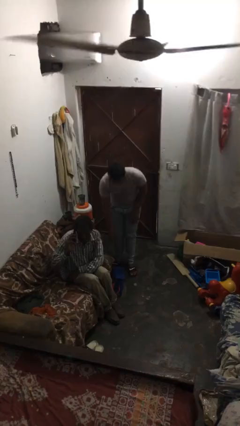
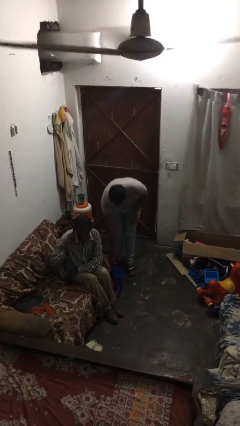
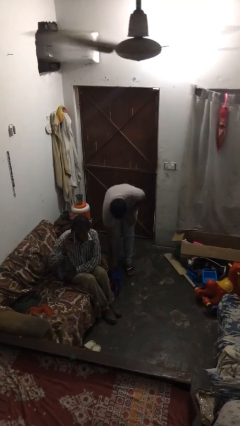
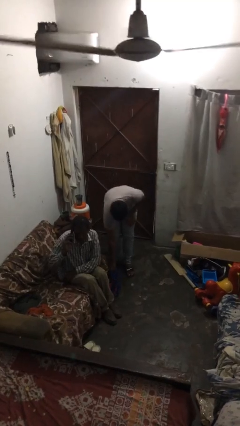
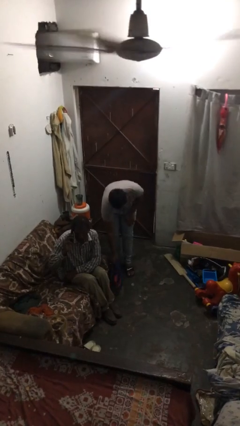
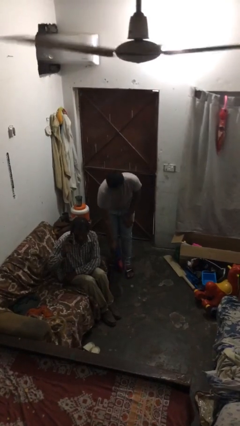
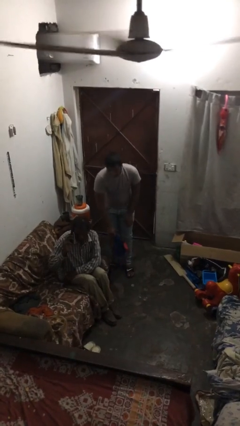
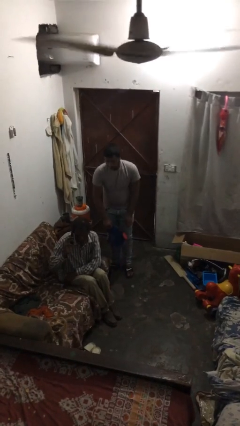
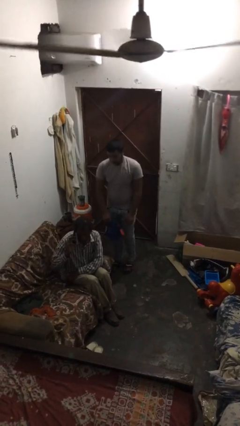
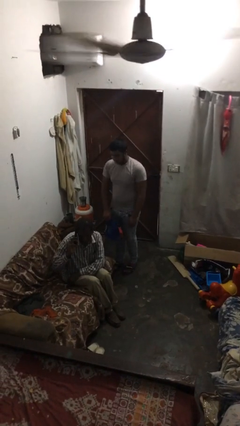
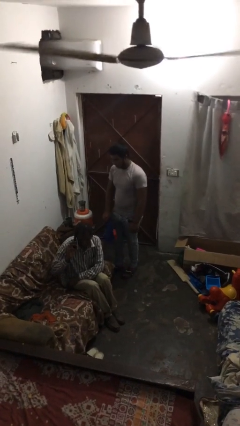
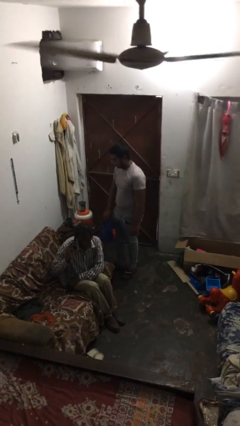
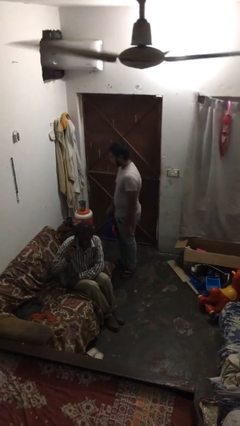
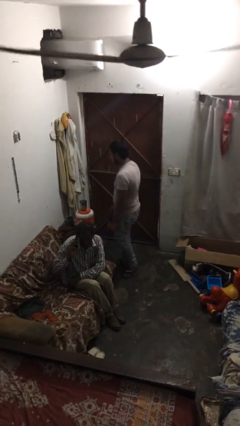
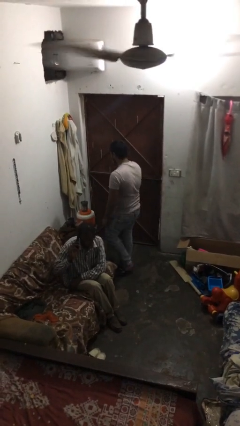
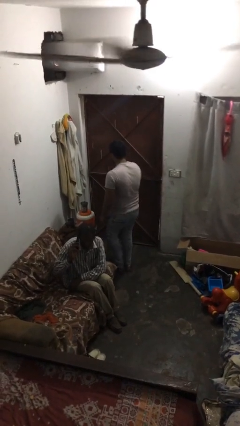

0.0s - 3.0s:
person steals object from person

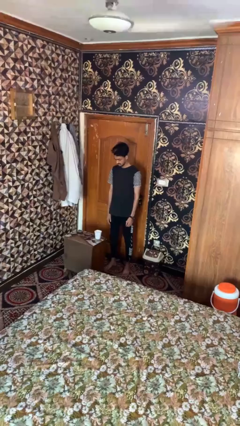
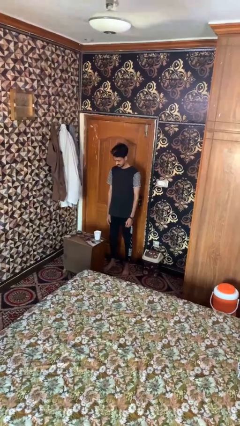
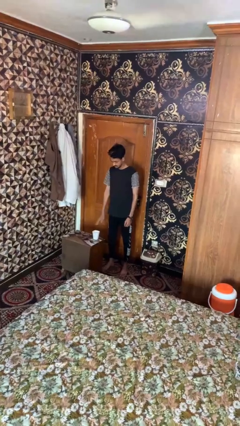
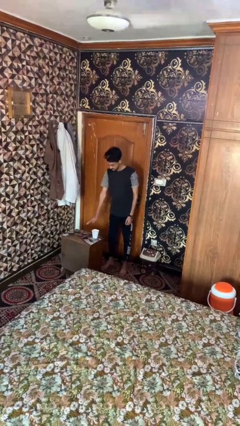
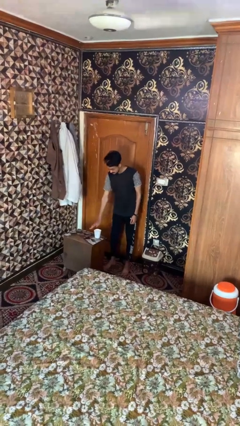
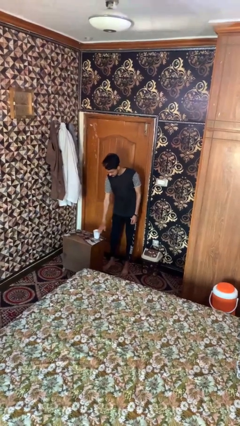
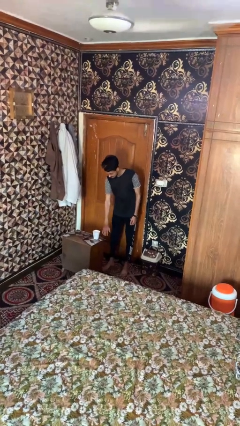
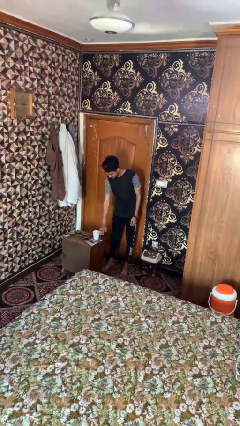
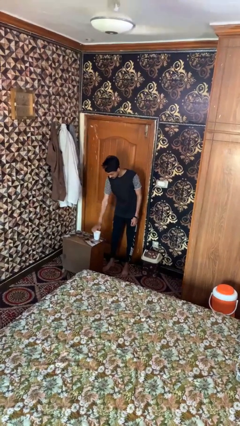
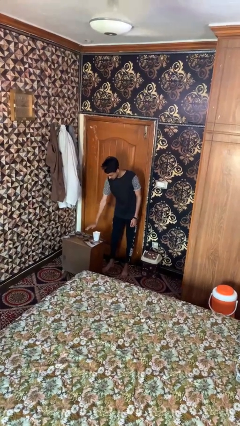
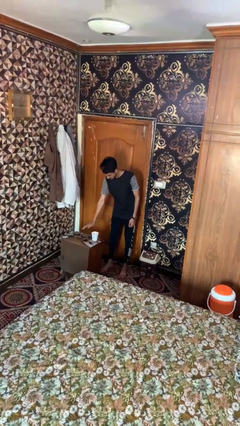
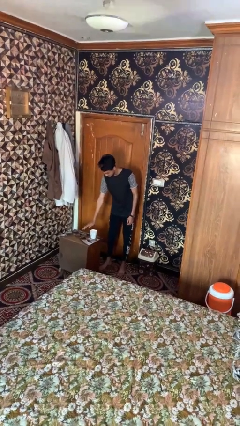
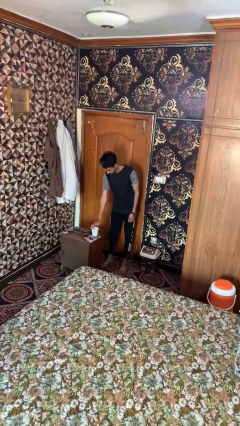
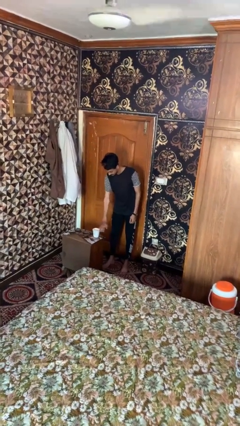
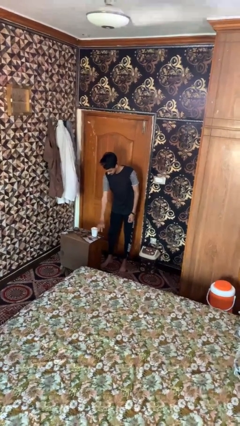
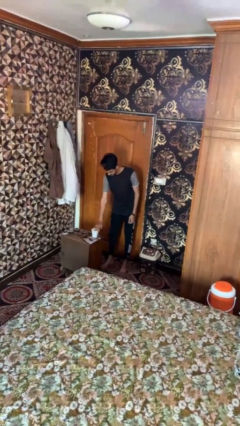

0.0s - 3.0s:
person waves hand over object

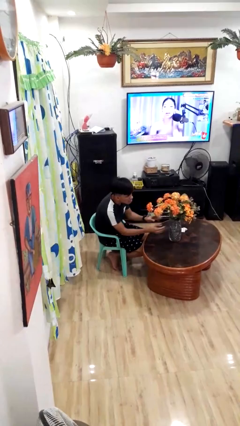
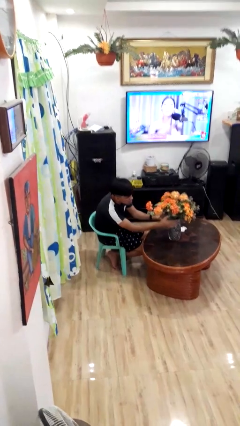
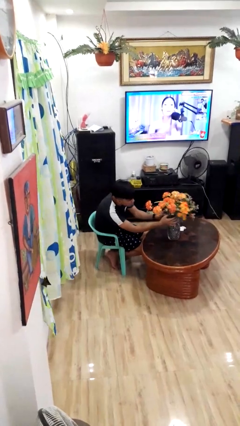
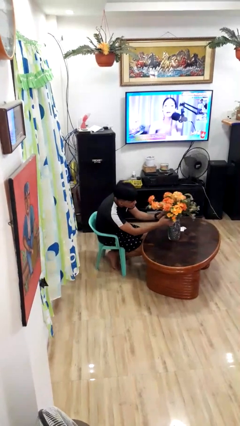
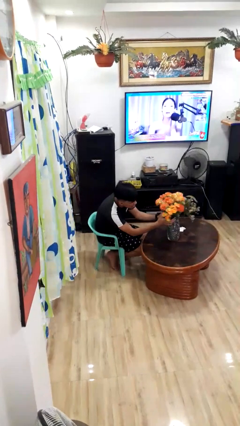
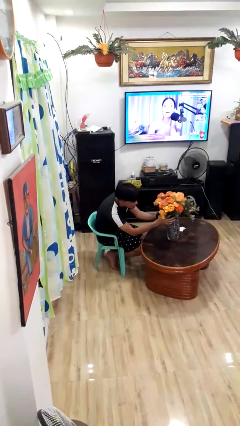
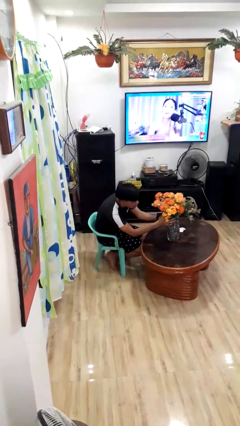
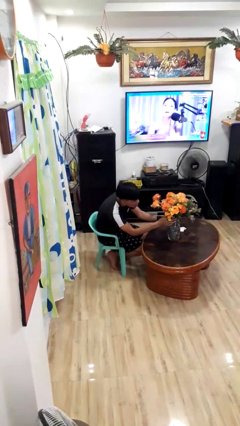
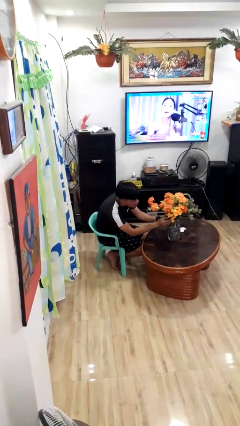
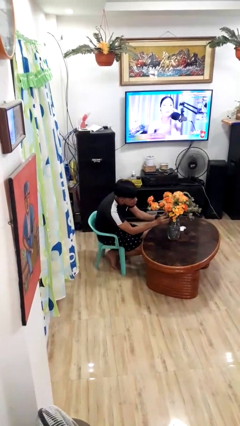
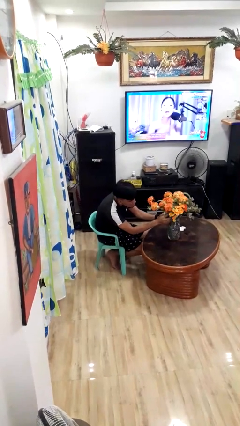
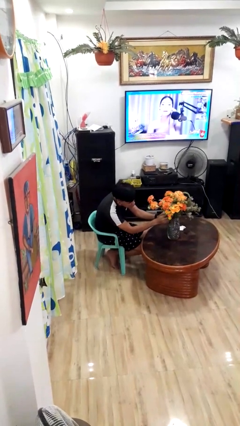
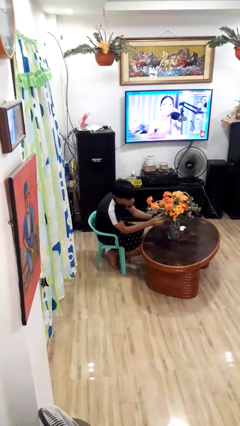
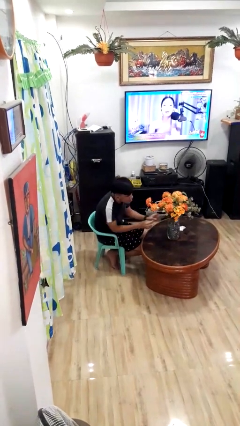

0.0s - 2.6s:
person arranges flowers in vase

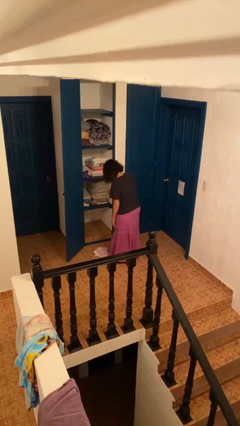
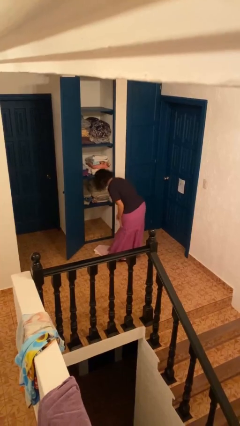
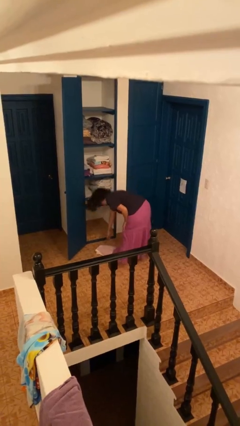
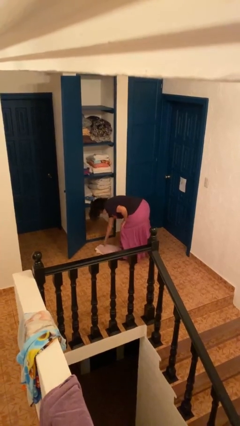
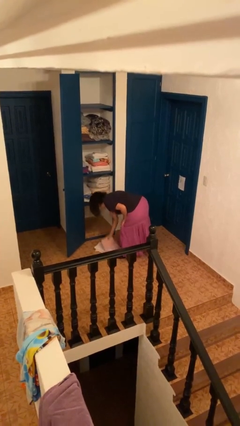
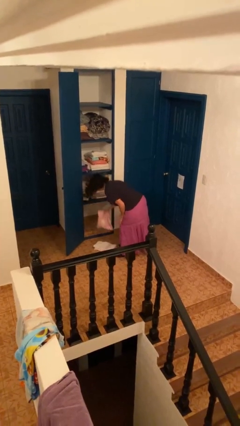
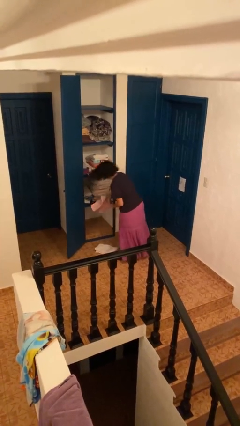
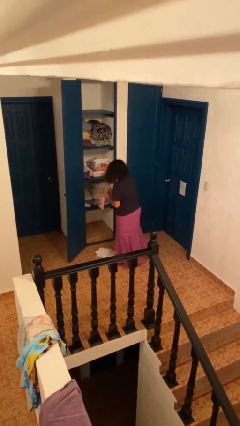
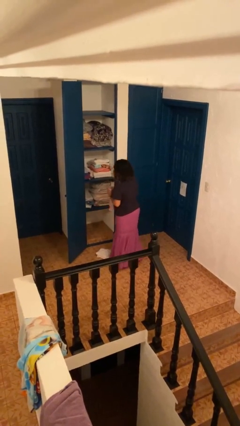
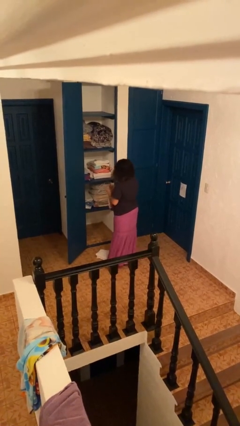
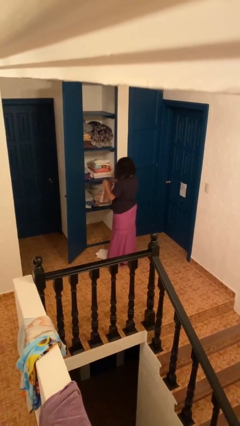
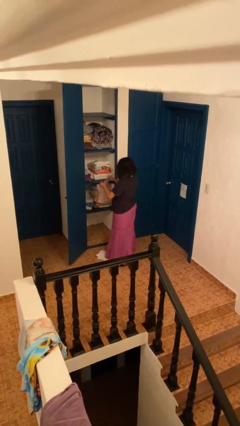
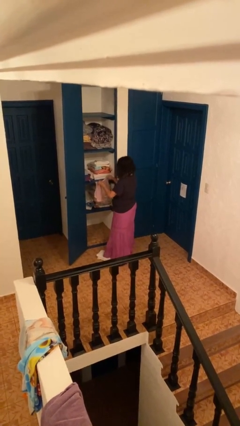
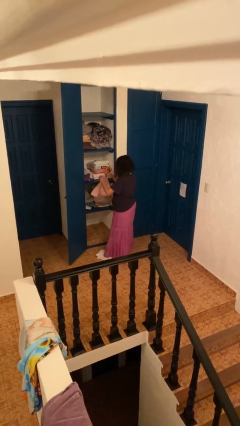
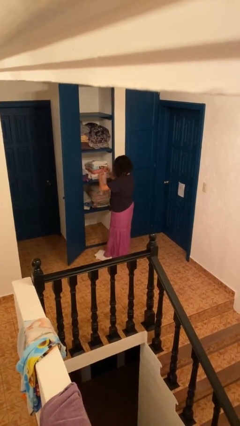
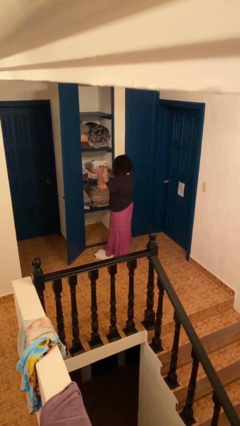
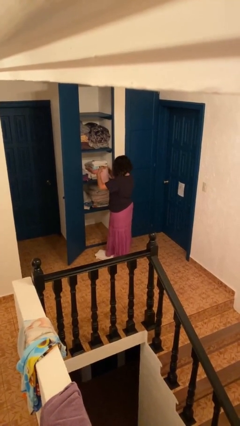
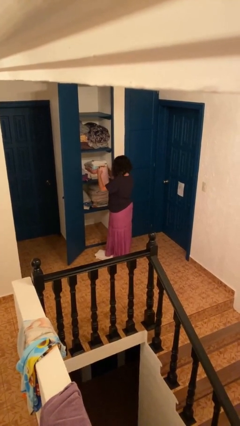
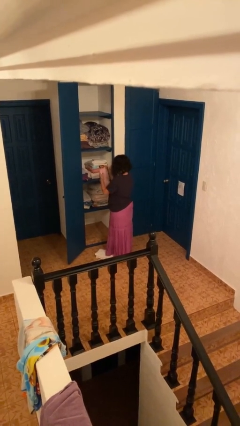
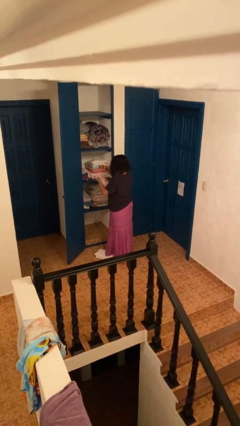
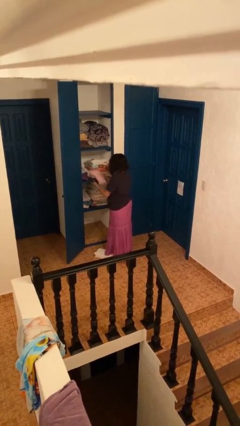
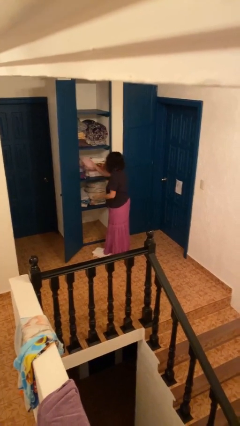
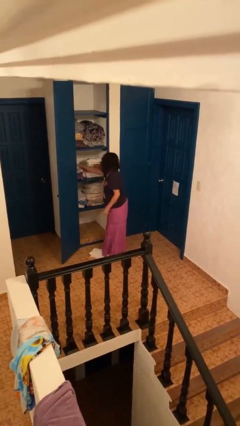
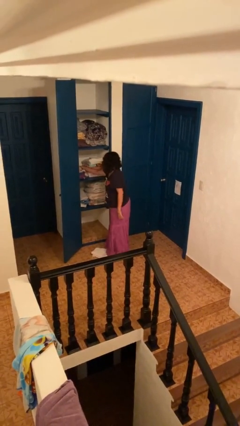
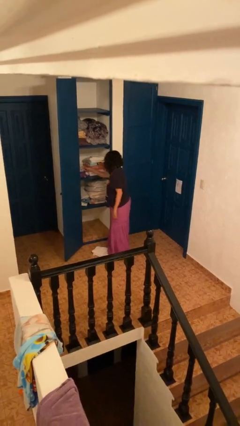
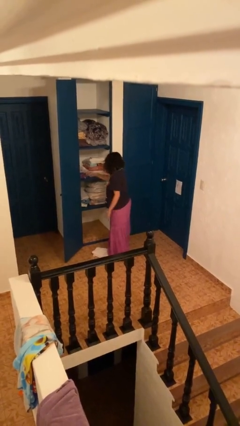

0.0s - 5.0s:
person folds towel

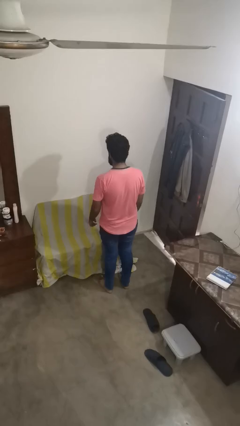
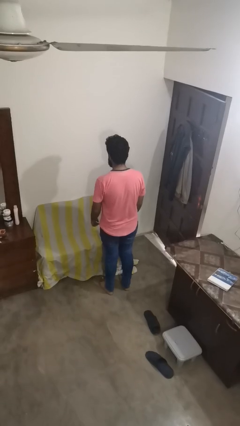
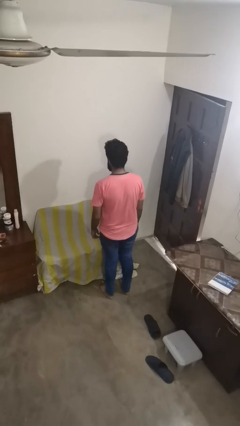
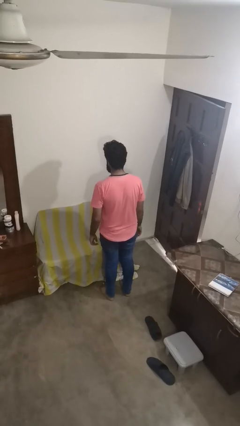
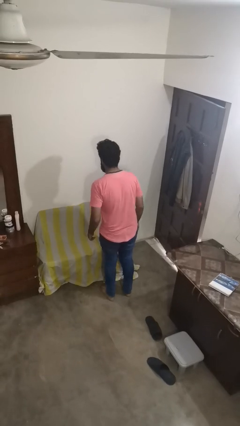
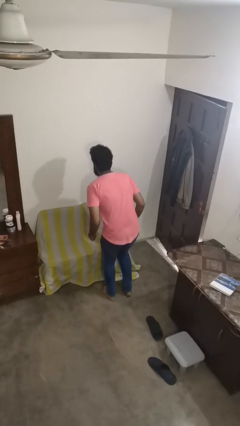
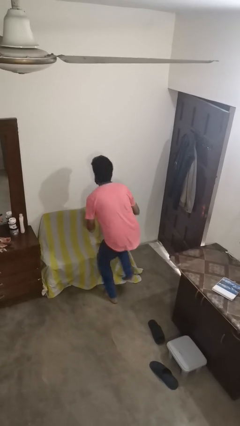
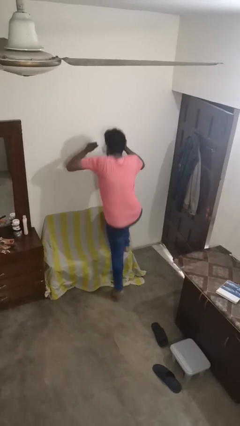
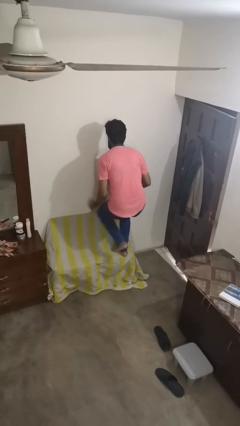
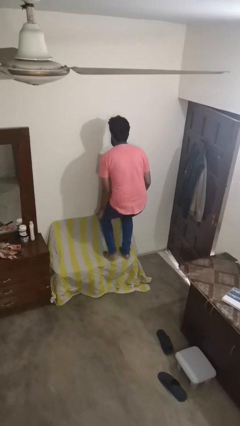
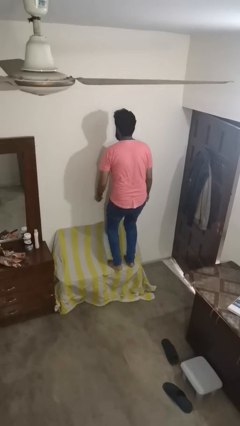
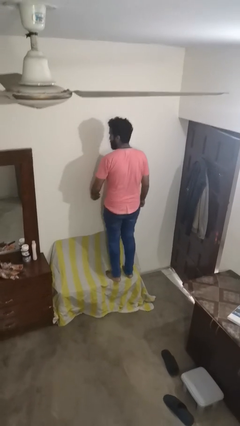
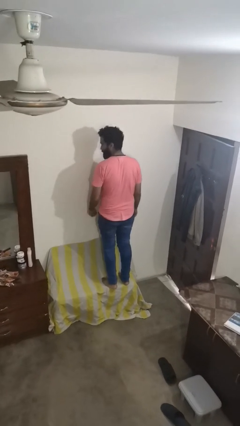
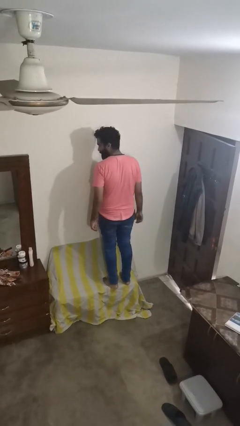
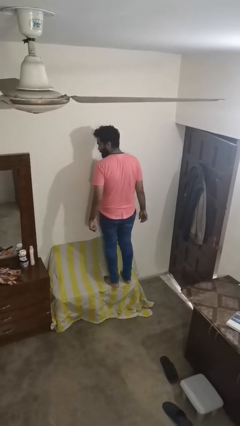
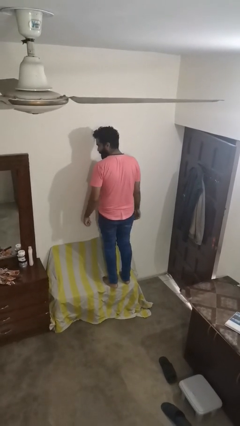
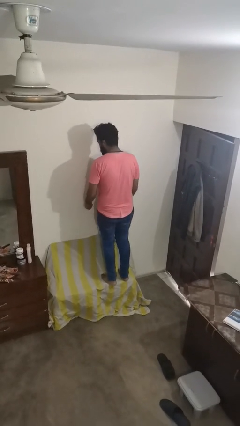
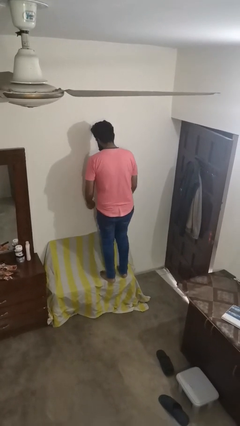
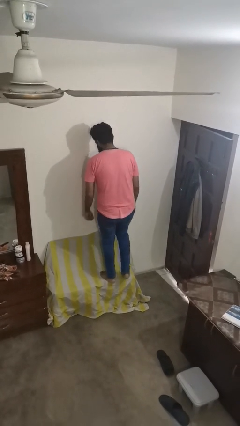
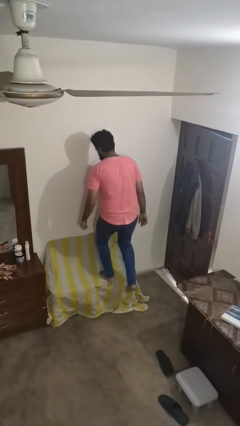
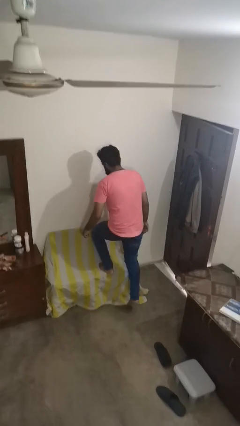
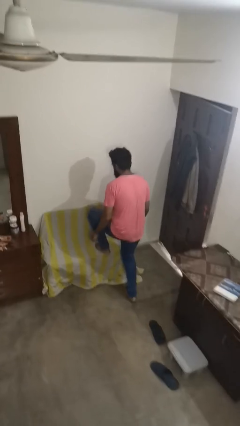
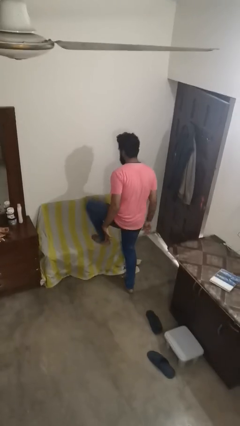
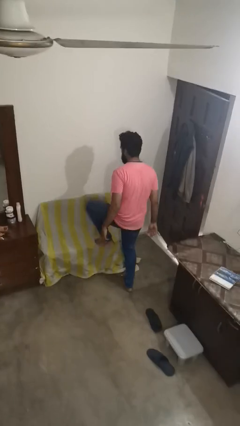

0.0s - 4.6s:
person jumps on couch
